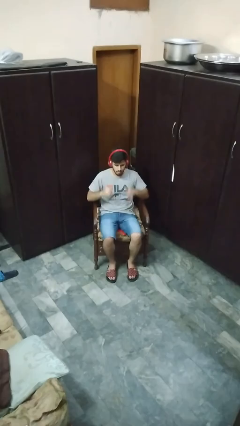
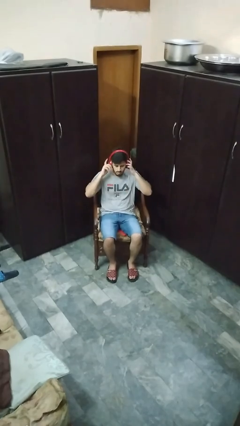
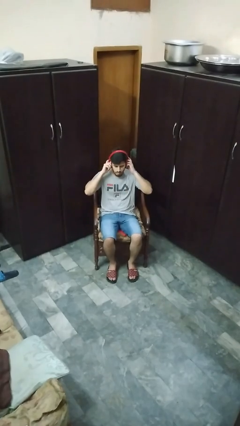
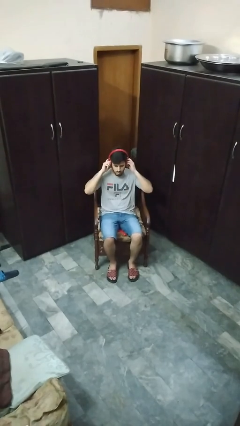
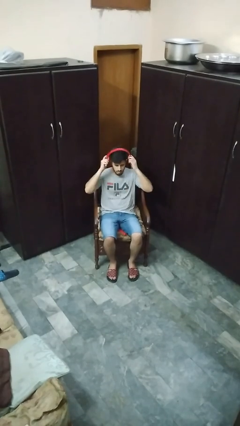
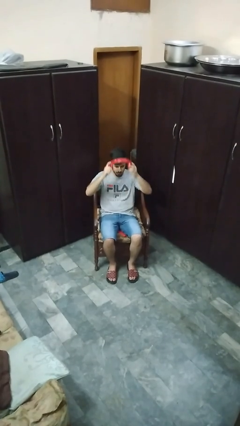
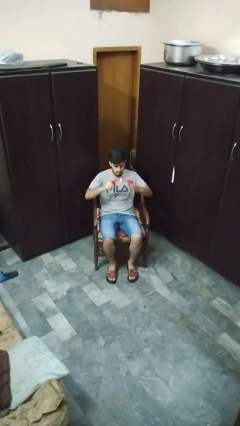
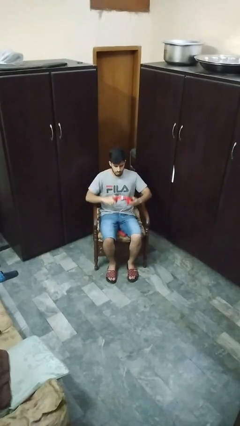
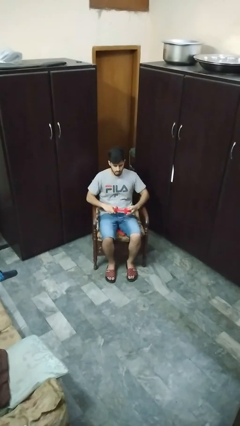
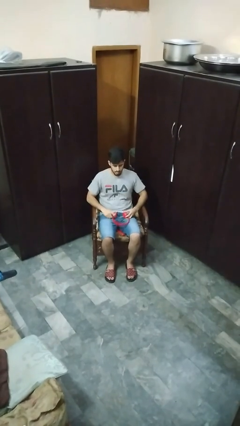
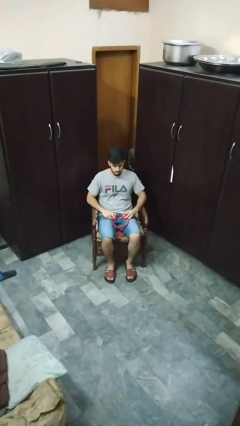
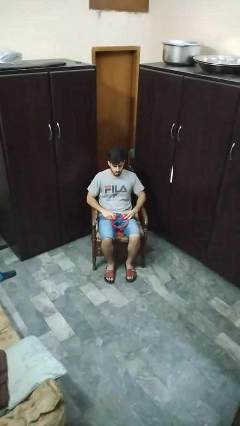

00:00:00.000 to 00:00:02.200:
person takes off headphones

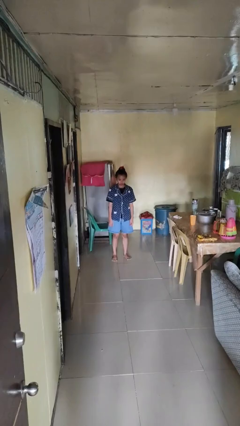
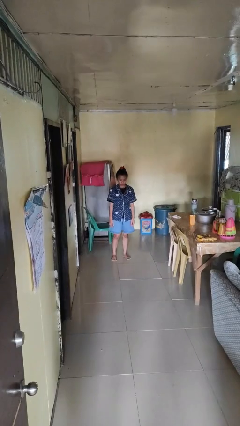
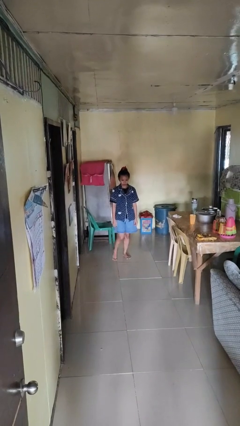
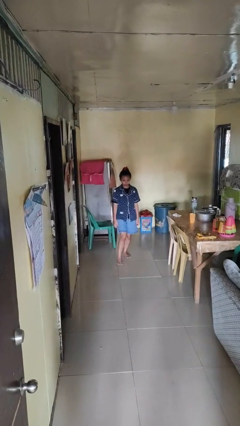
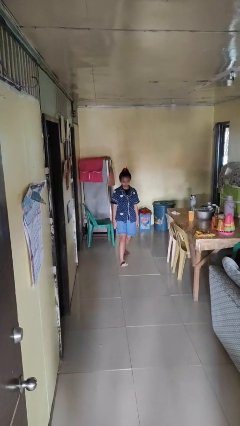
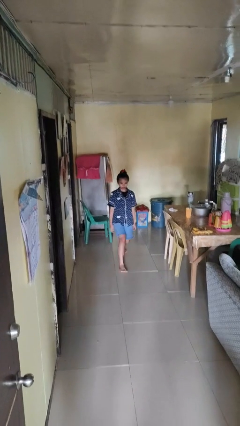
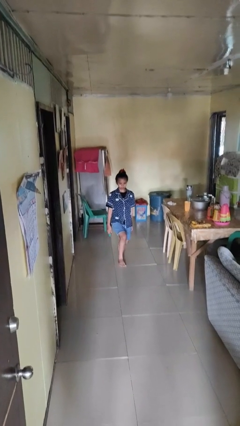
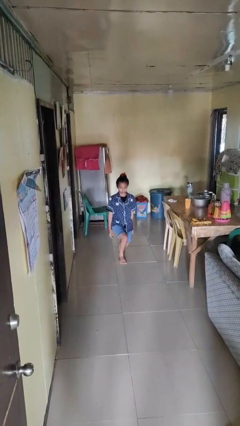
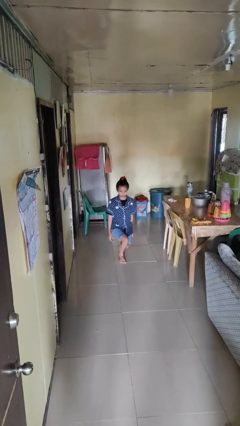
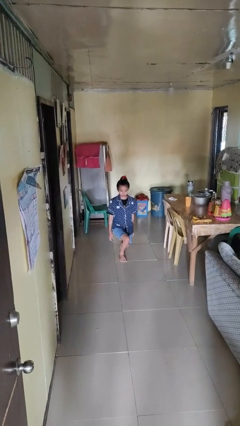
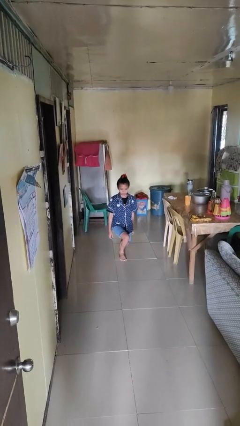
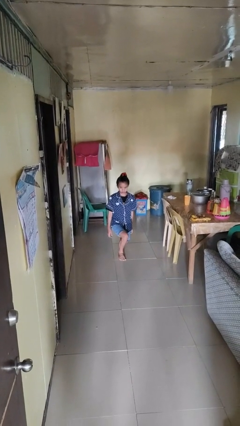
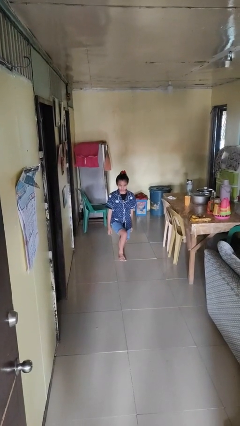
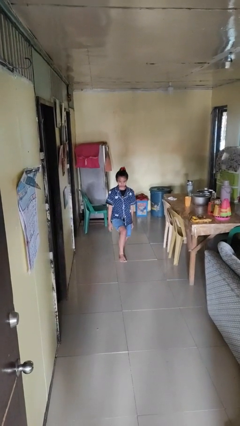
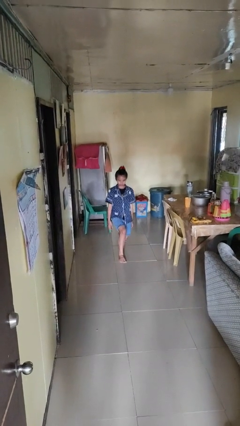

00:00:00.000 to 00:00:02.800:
person exercises with lunges

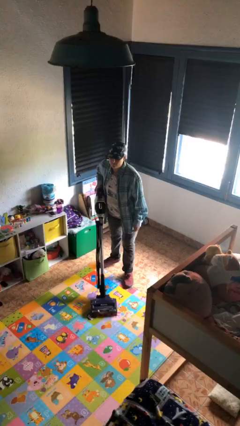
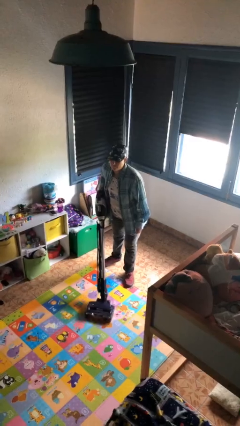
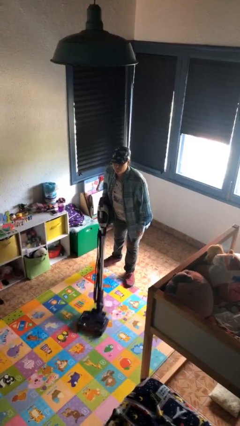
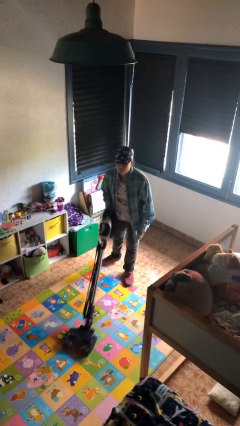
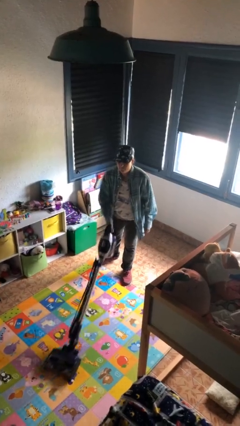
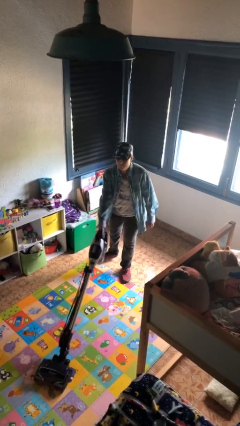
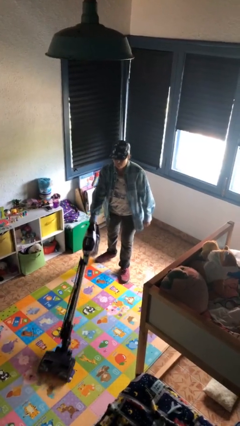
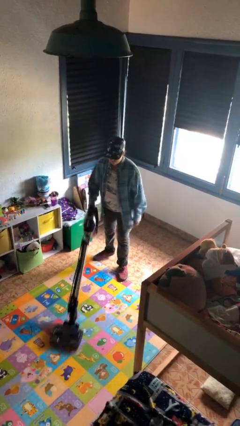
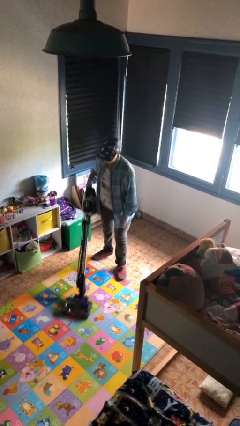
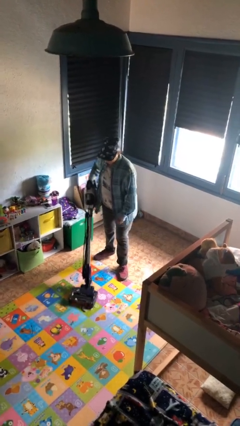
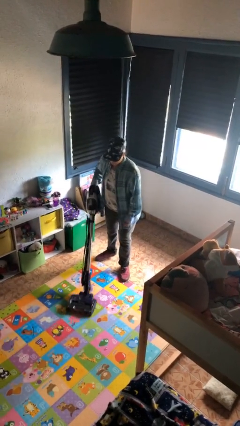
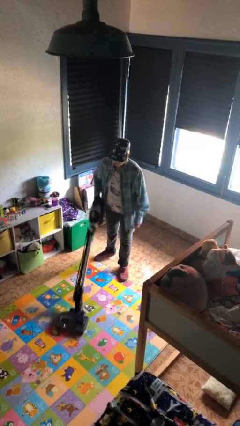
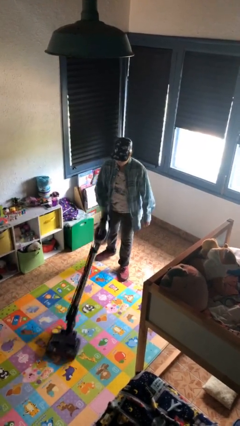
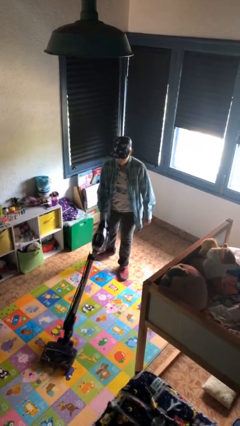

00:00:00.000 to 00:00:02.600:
person vacuums carpet

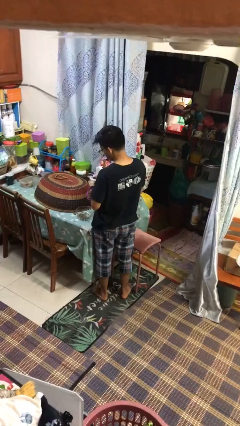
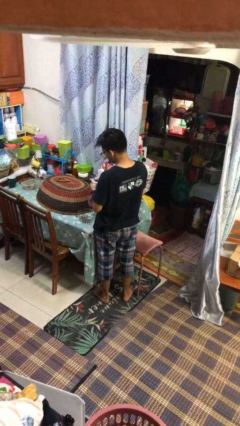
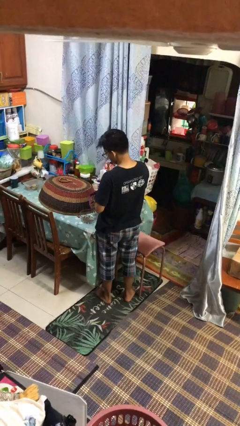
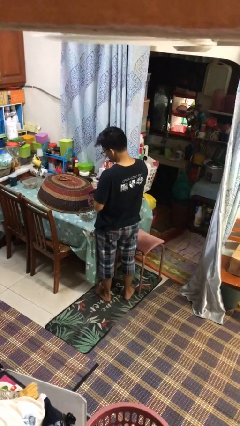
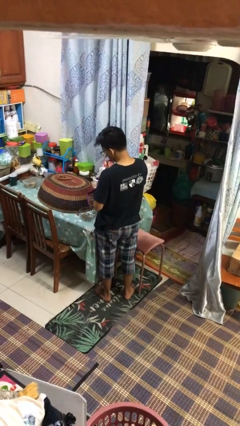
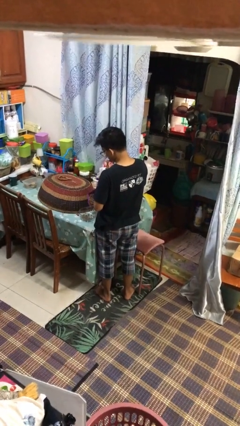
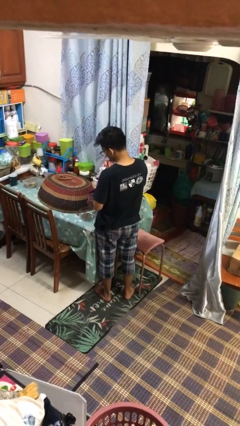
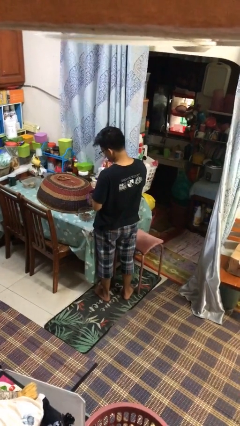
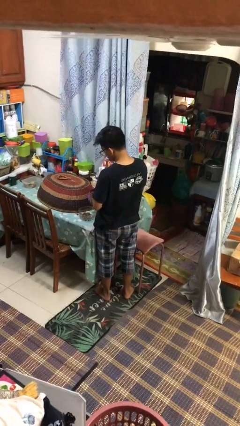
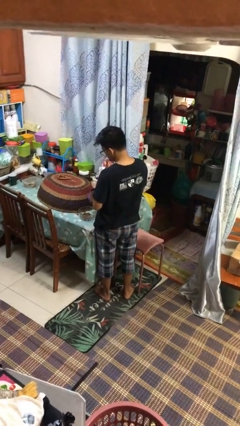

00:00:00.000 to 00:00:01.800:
person pours into bowl

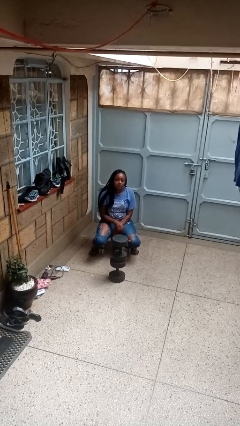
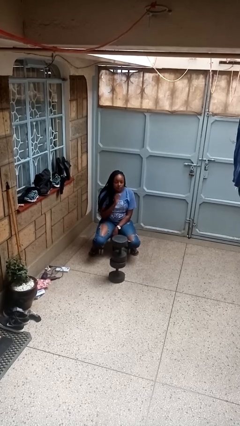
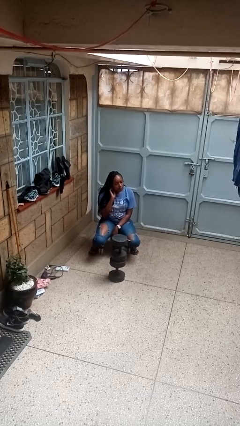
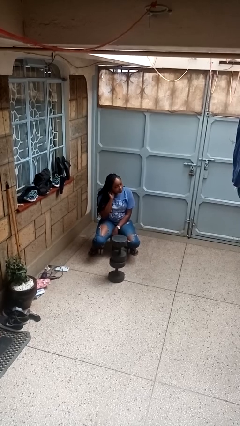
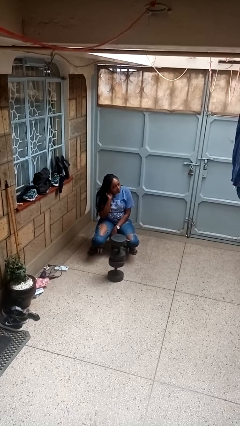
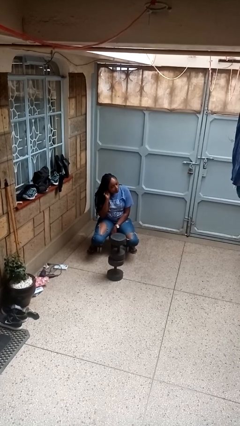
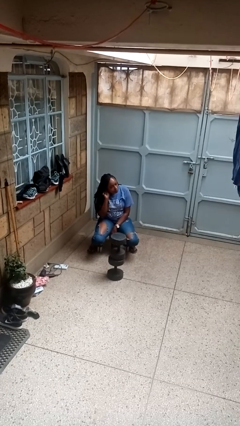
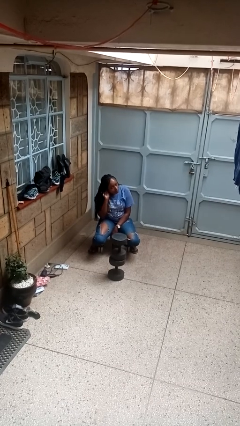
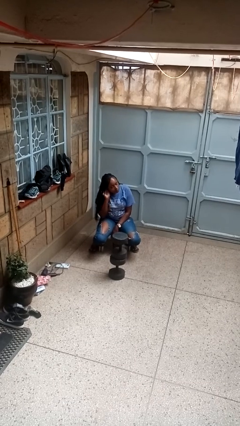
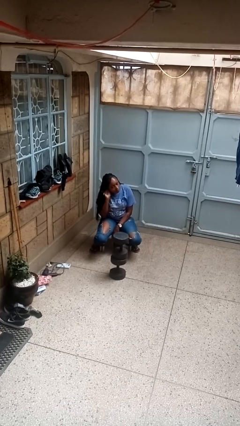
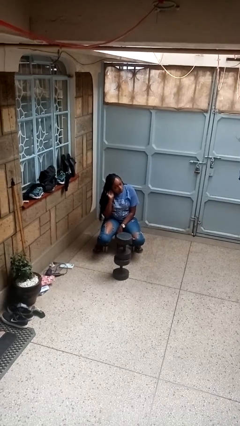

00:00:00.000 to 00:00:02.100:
person gestures listen closely

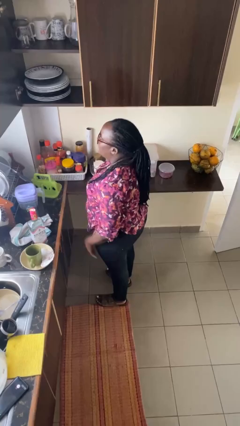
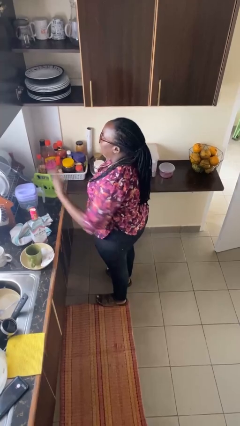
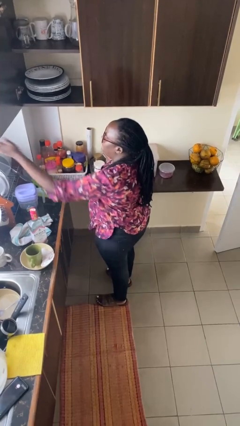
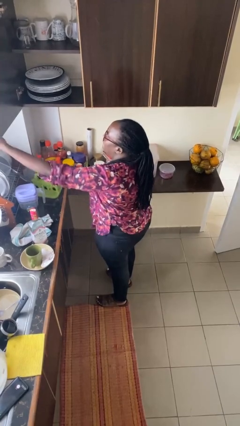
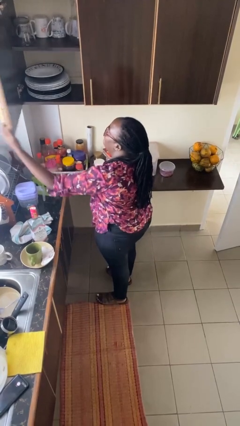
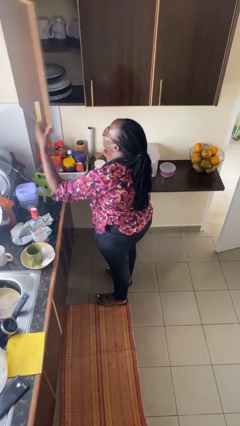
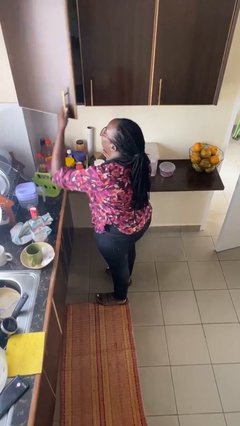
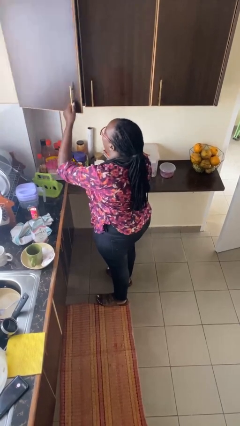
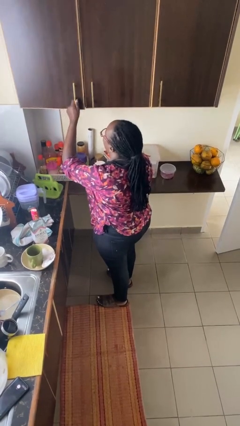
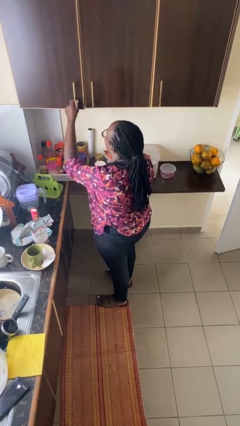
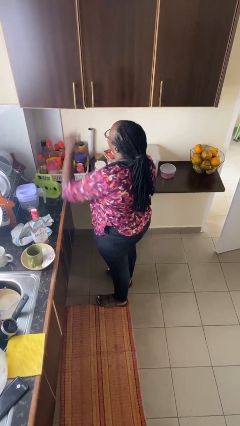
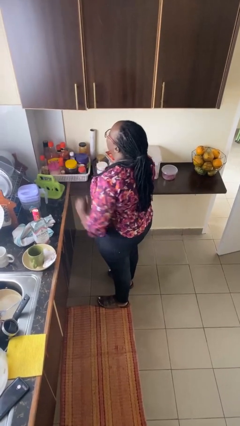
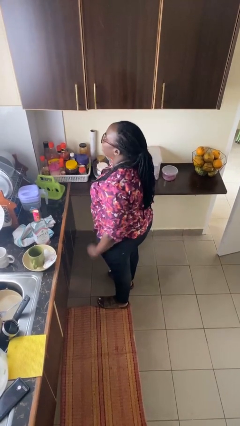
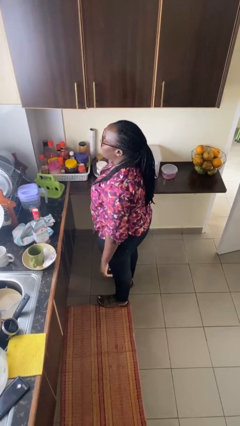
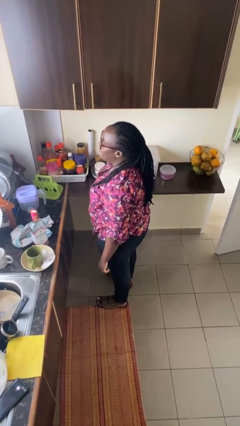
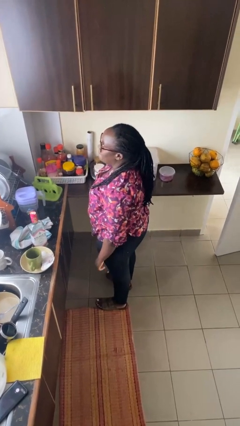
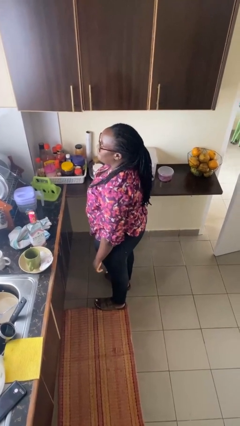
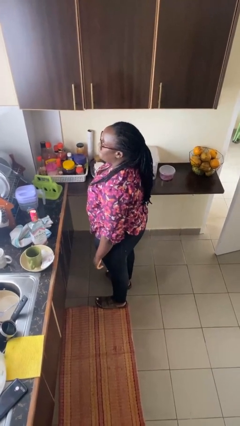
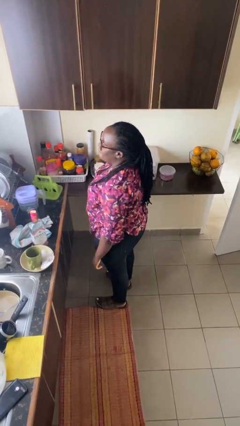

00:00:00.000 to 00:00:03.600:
person closes cabinet

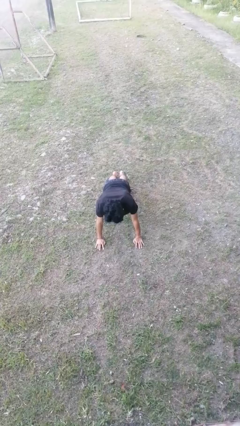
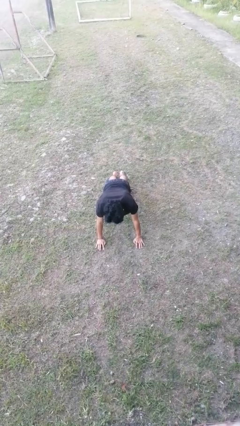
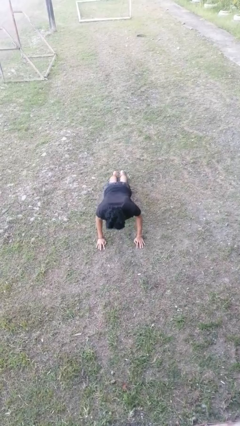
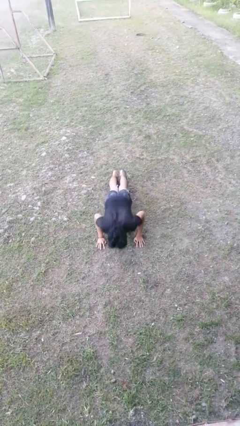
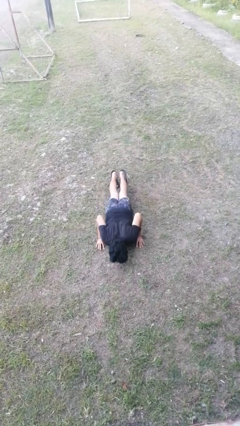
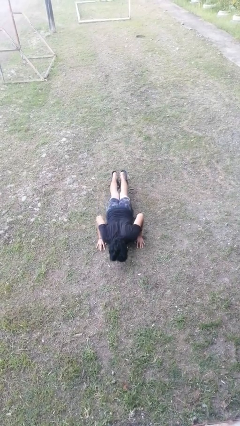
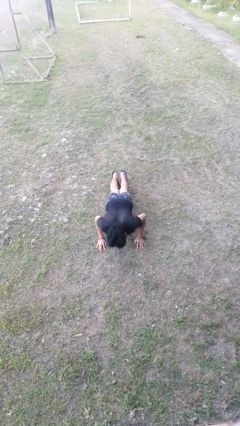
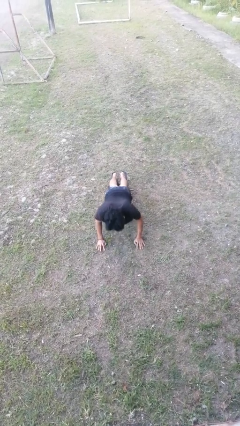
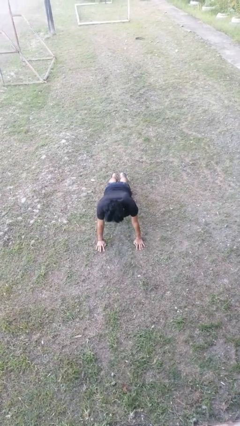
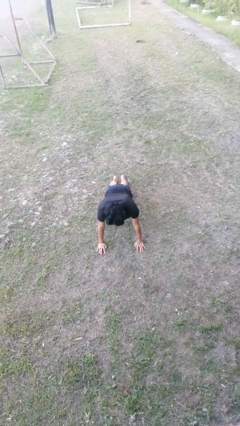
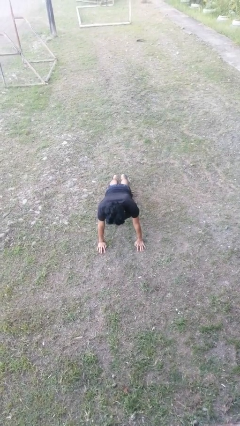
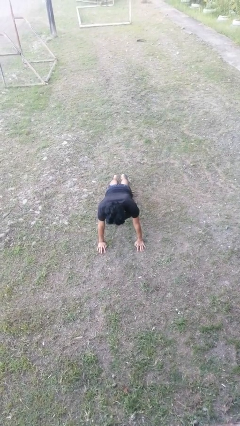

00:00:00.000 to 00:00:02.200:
person exercises with pushup
